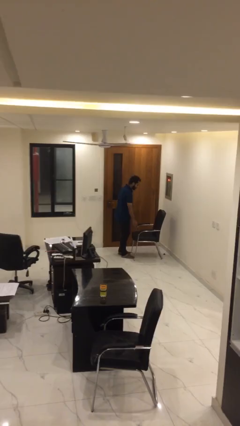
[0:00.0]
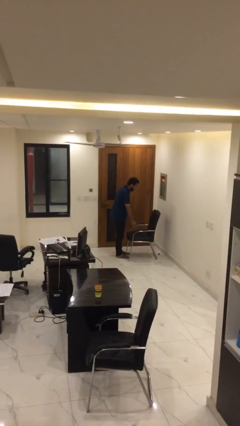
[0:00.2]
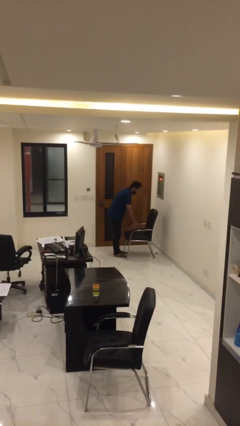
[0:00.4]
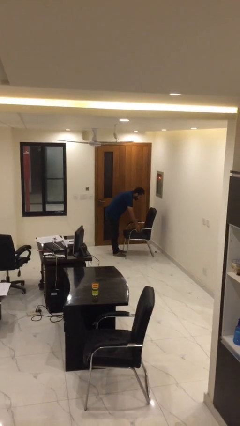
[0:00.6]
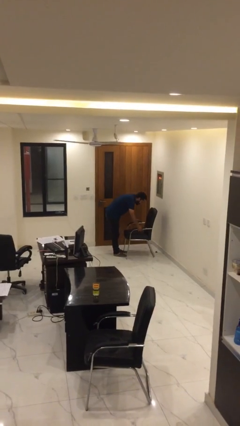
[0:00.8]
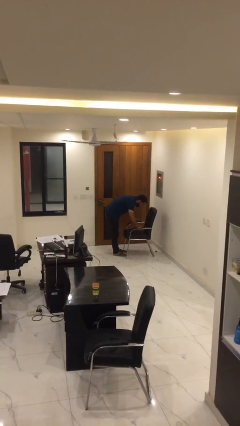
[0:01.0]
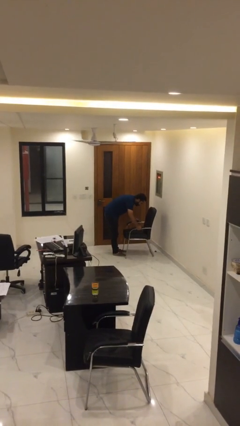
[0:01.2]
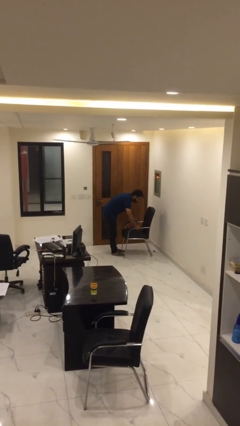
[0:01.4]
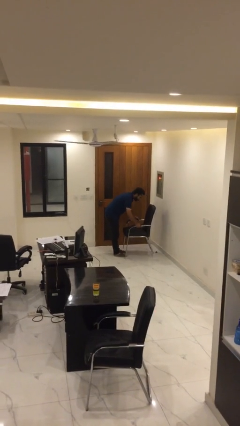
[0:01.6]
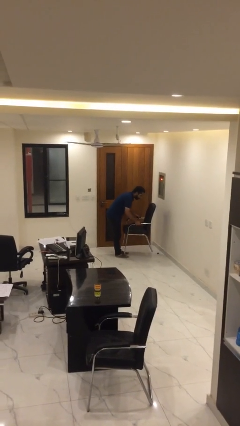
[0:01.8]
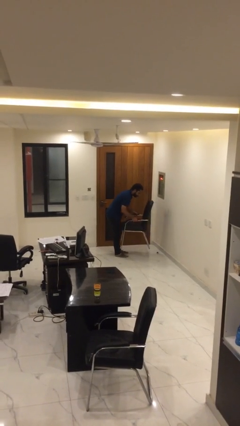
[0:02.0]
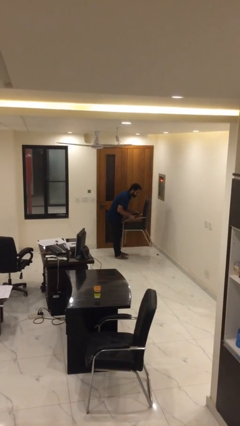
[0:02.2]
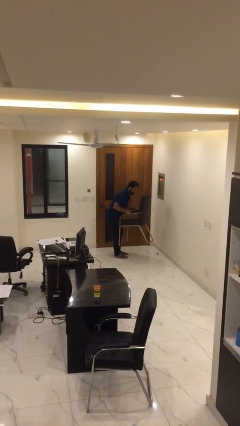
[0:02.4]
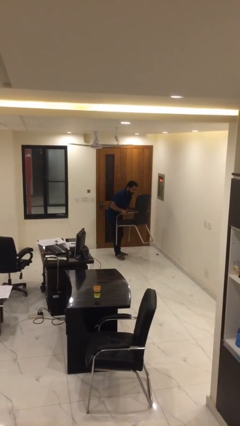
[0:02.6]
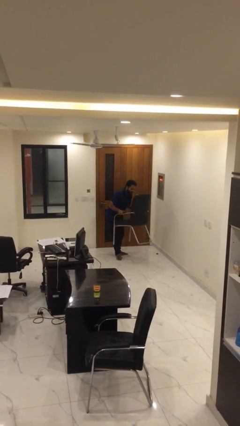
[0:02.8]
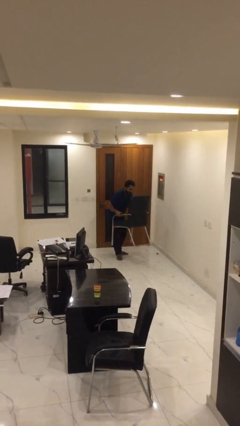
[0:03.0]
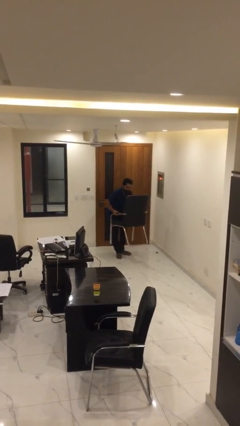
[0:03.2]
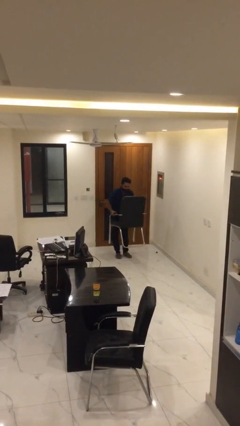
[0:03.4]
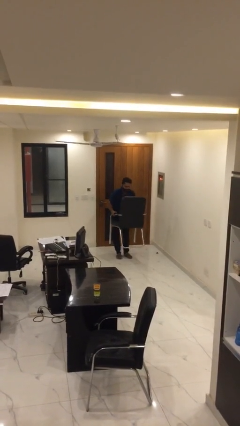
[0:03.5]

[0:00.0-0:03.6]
person picks up object from floor

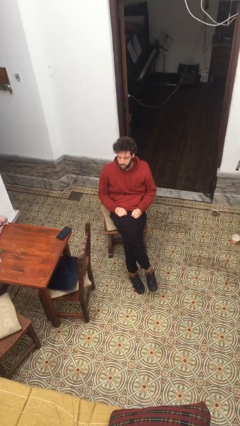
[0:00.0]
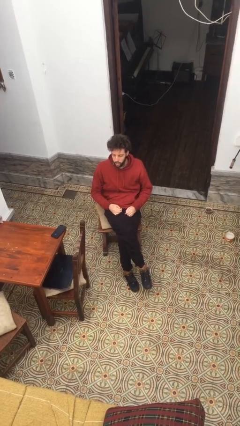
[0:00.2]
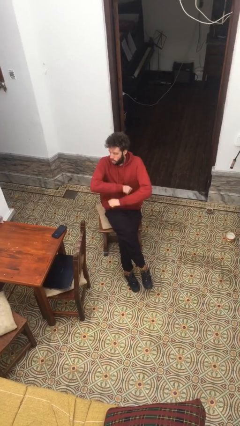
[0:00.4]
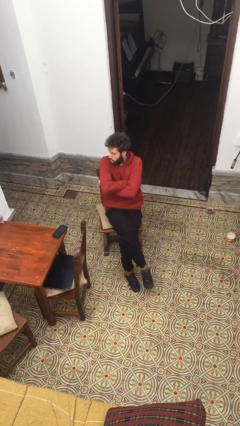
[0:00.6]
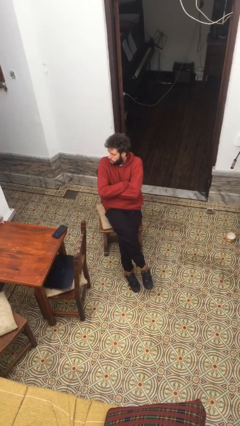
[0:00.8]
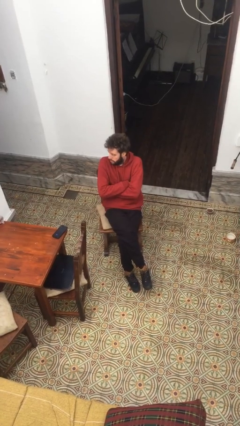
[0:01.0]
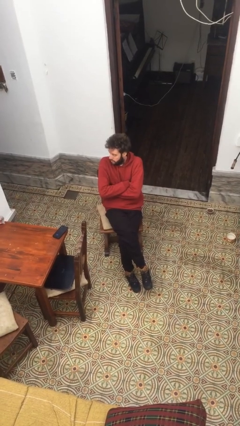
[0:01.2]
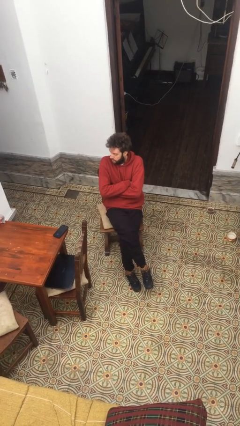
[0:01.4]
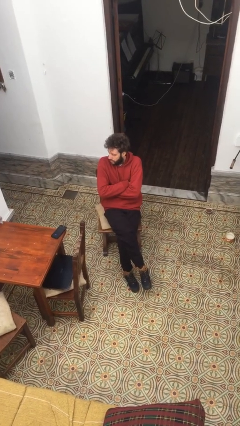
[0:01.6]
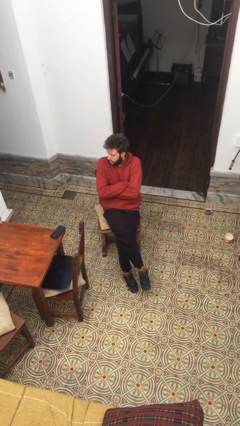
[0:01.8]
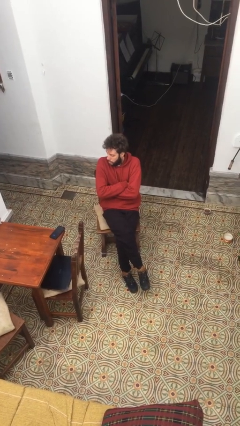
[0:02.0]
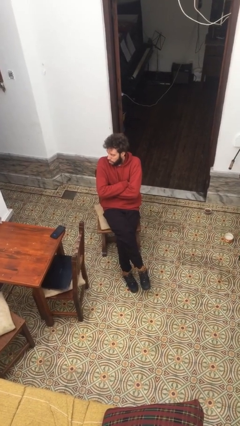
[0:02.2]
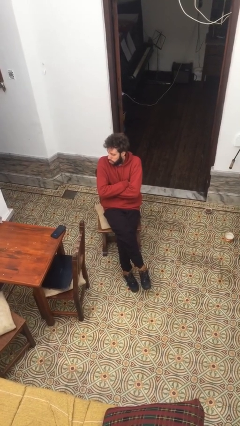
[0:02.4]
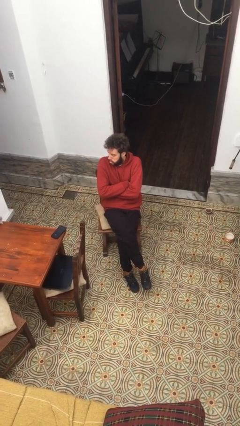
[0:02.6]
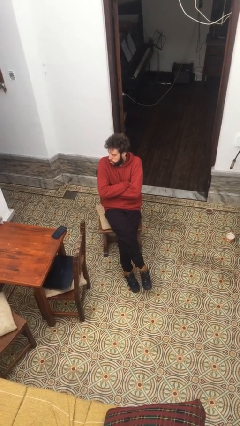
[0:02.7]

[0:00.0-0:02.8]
person crosses arms

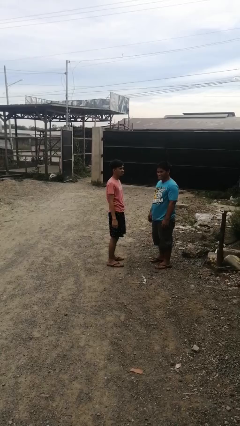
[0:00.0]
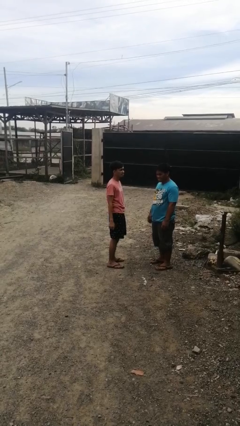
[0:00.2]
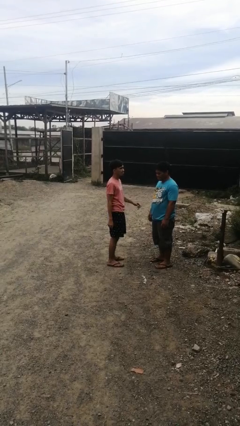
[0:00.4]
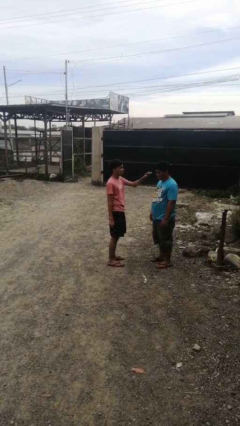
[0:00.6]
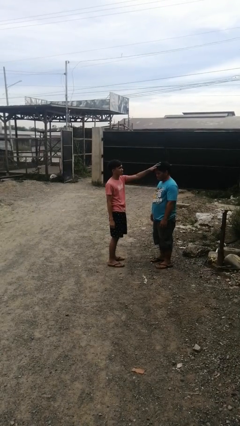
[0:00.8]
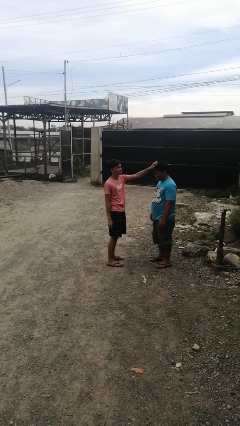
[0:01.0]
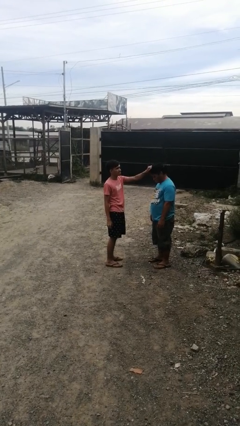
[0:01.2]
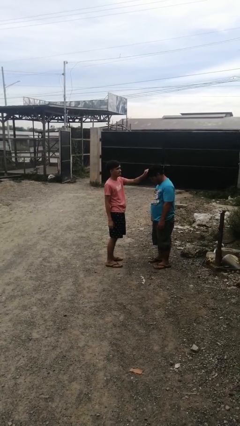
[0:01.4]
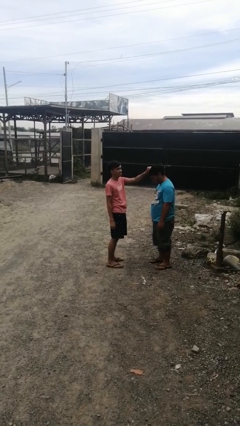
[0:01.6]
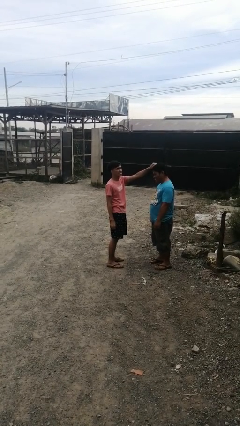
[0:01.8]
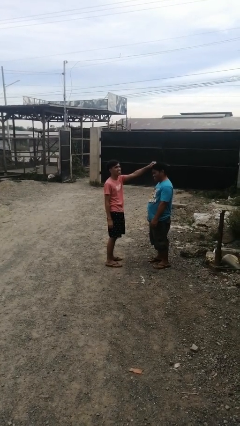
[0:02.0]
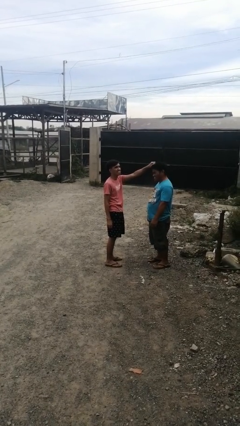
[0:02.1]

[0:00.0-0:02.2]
person grabs person by hair

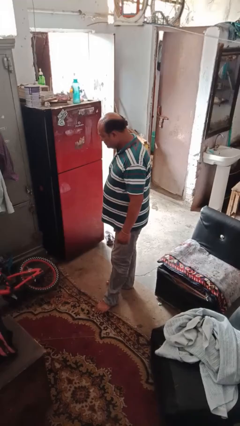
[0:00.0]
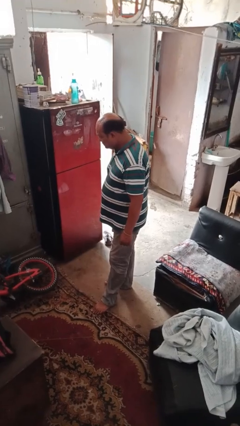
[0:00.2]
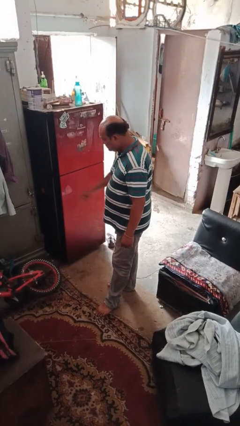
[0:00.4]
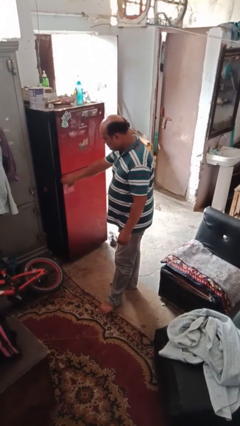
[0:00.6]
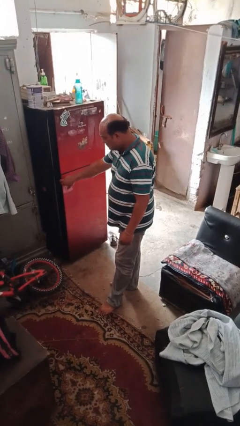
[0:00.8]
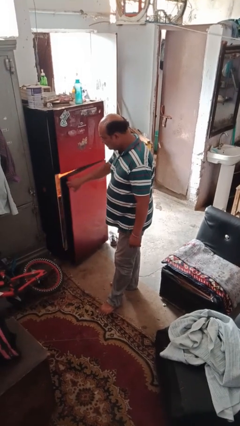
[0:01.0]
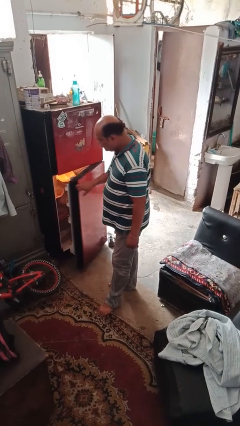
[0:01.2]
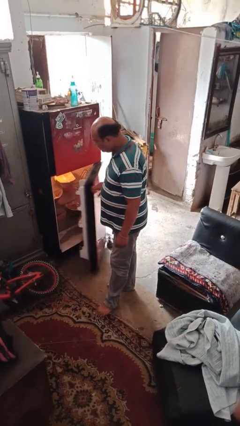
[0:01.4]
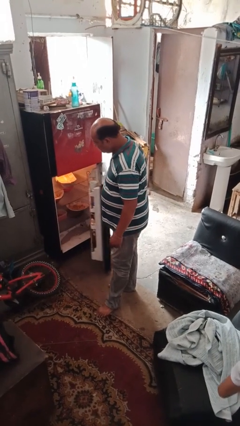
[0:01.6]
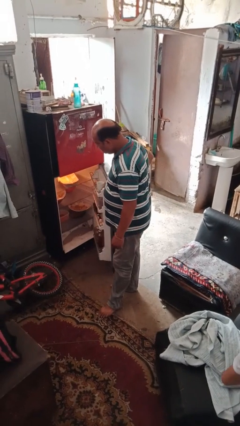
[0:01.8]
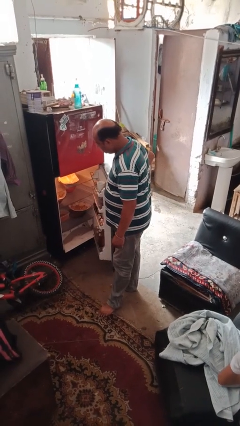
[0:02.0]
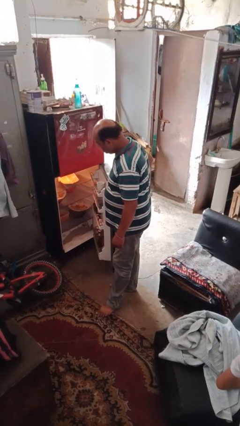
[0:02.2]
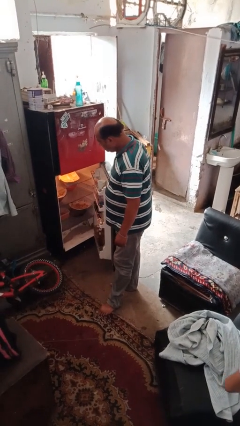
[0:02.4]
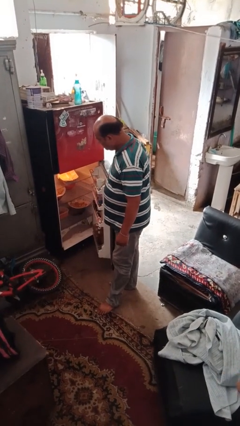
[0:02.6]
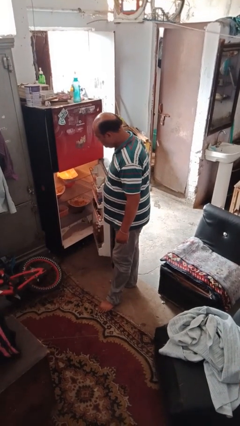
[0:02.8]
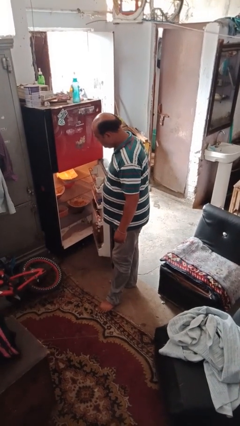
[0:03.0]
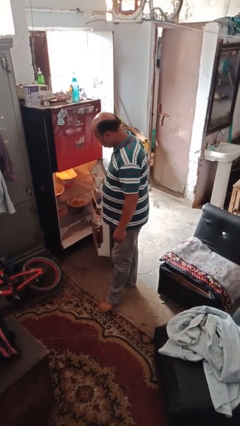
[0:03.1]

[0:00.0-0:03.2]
person opens refrigerator

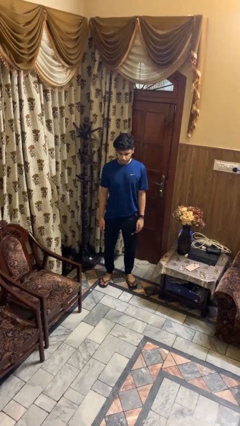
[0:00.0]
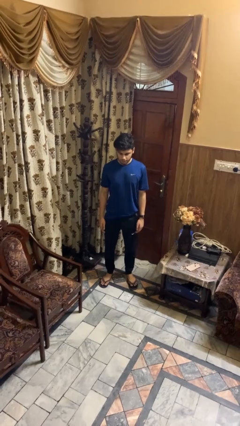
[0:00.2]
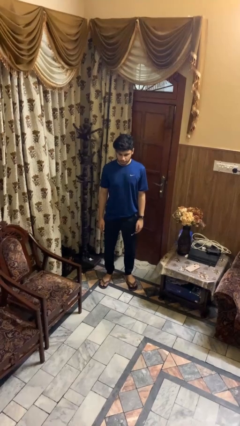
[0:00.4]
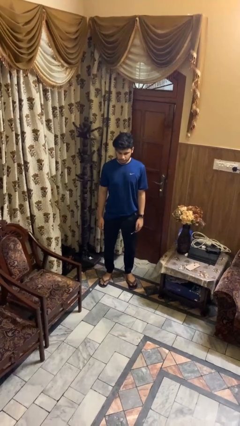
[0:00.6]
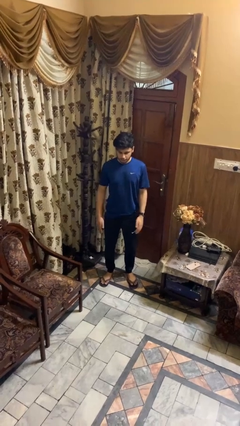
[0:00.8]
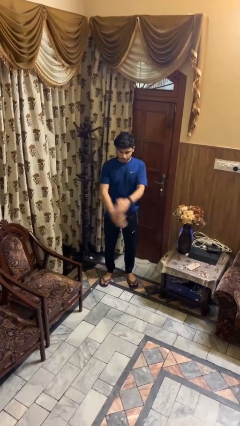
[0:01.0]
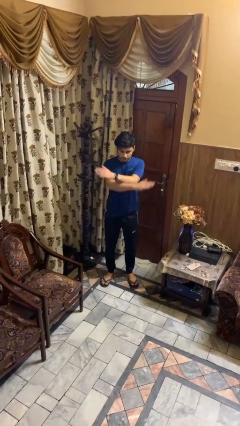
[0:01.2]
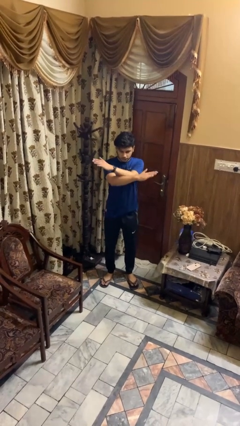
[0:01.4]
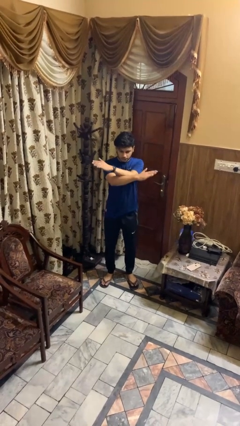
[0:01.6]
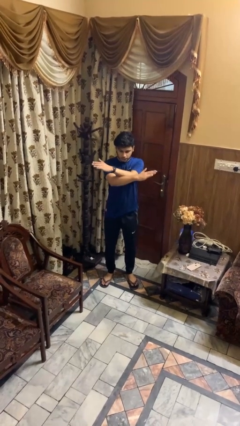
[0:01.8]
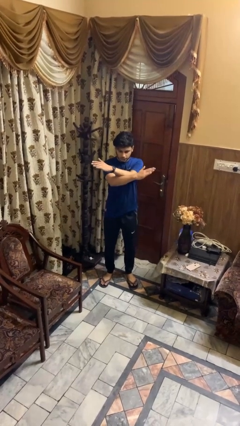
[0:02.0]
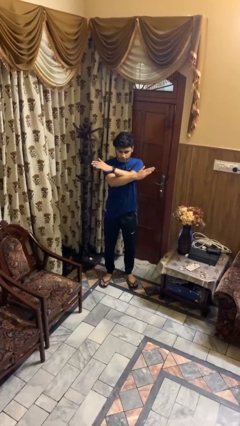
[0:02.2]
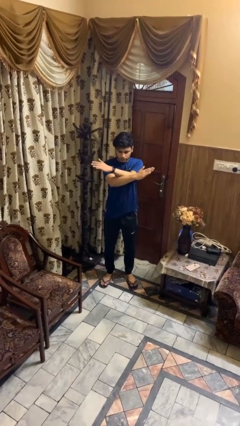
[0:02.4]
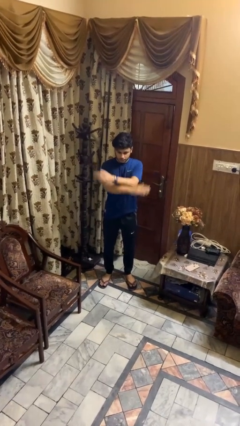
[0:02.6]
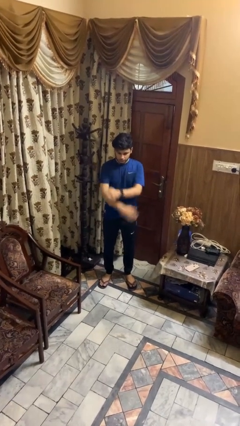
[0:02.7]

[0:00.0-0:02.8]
person gestures arms x

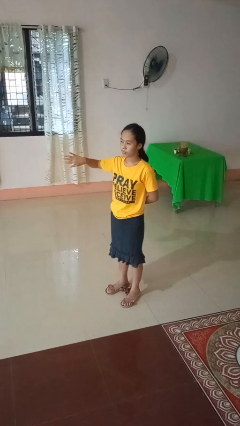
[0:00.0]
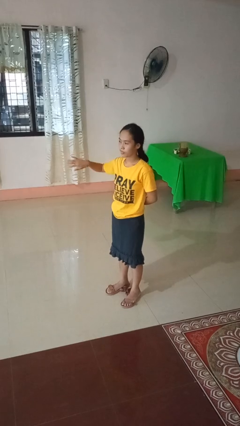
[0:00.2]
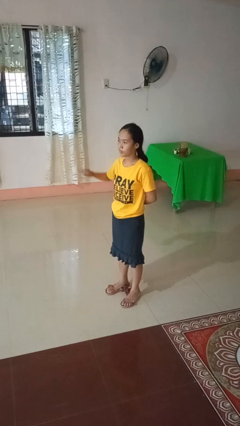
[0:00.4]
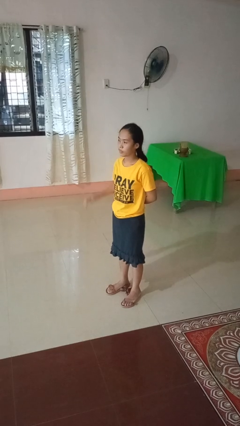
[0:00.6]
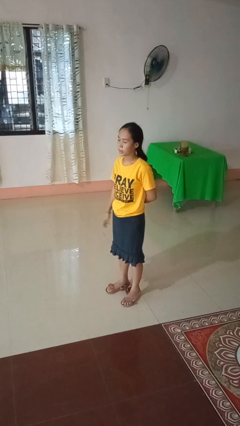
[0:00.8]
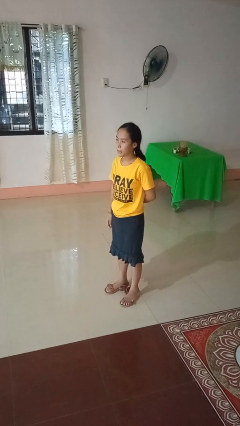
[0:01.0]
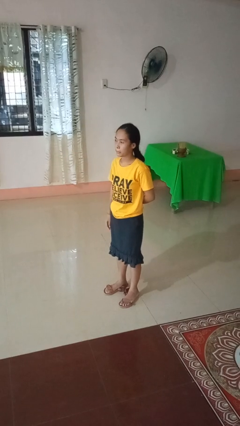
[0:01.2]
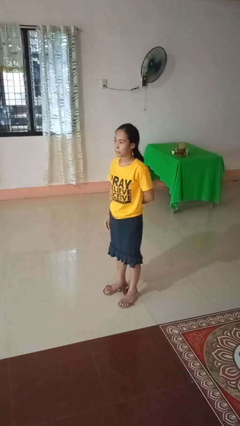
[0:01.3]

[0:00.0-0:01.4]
person gestures swipe right

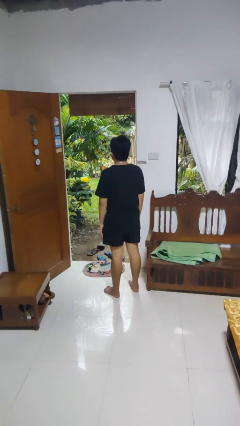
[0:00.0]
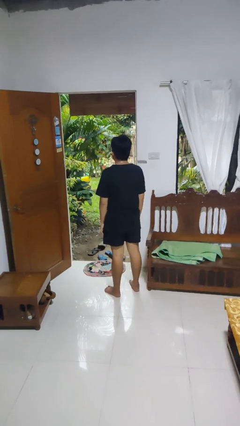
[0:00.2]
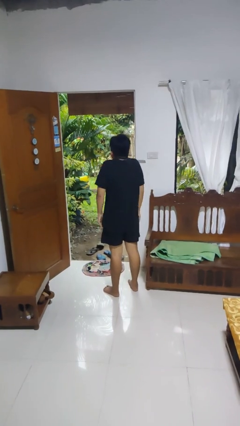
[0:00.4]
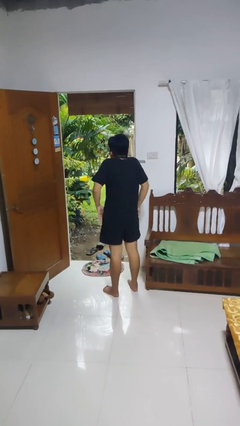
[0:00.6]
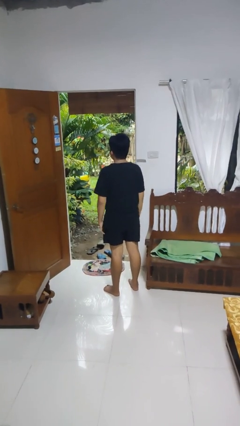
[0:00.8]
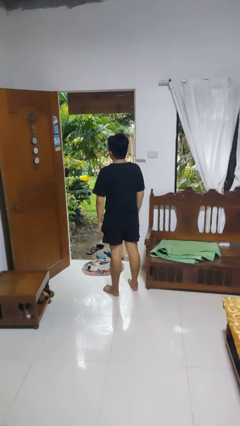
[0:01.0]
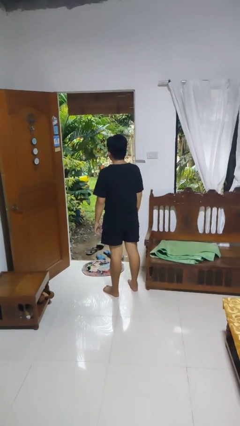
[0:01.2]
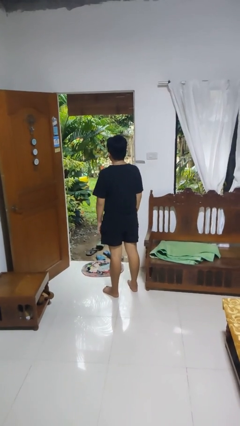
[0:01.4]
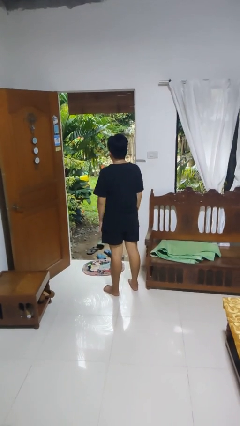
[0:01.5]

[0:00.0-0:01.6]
person shrugs
